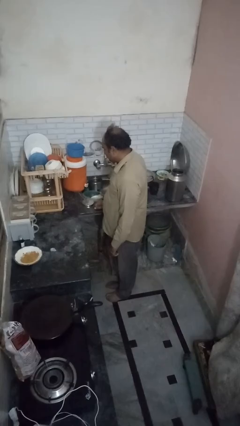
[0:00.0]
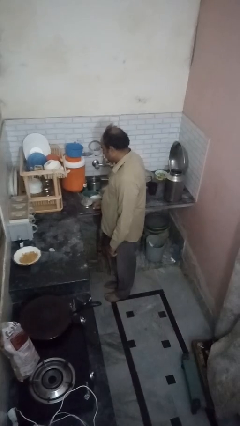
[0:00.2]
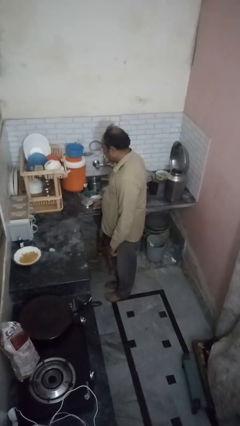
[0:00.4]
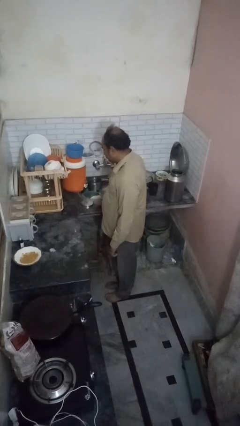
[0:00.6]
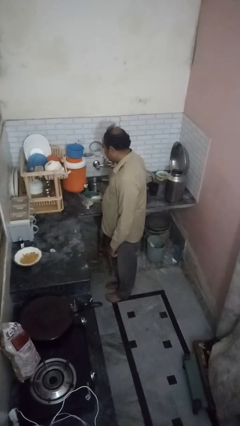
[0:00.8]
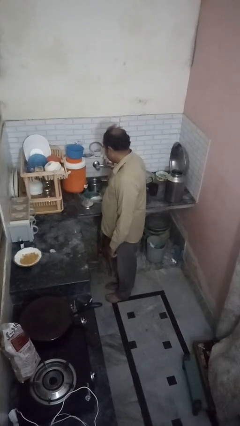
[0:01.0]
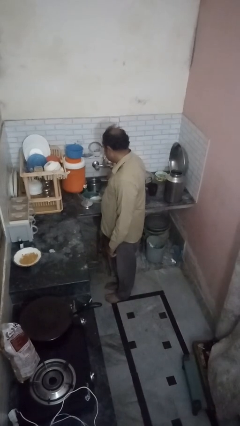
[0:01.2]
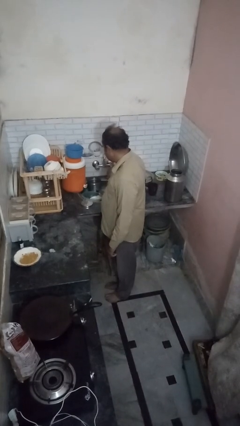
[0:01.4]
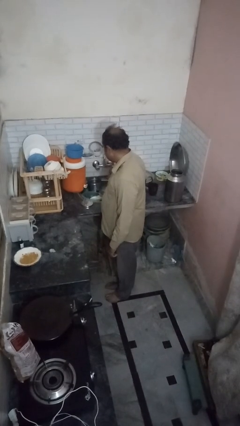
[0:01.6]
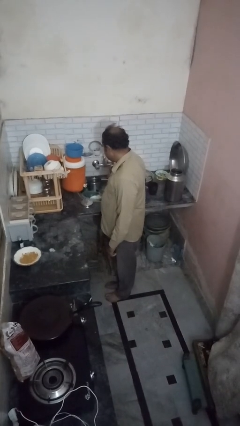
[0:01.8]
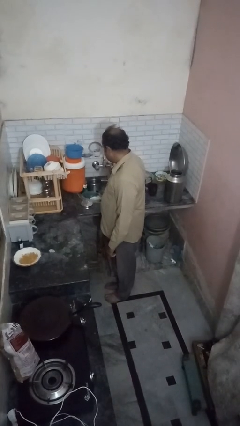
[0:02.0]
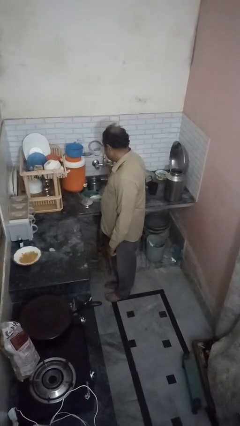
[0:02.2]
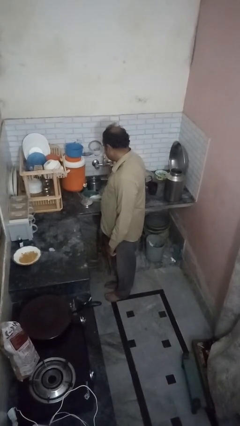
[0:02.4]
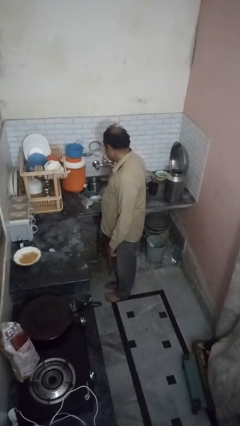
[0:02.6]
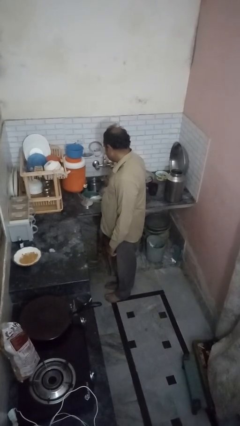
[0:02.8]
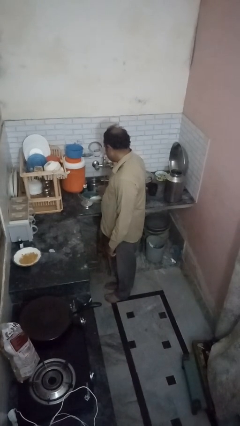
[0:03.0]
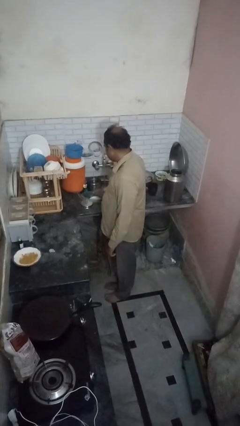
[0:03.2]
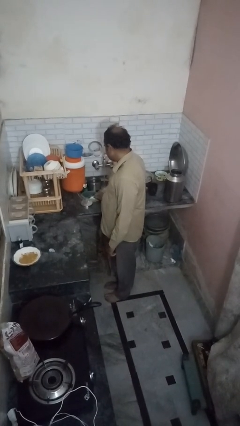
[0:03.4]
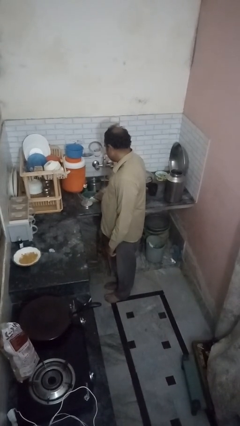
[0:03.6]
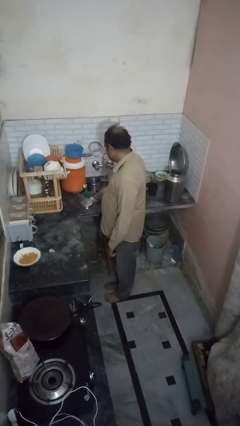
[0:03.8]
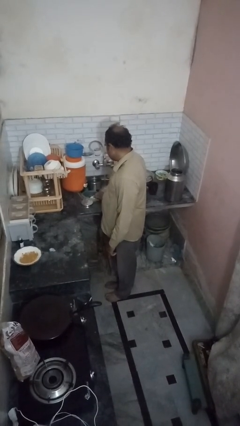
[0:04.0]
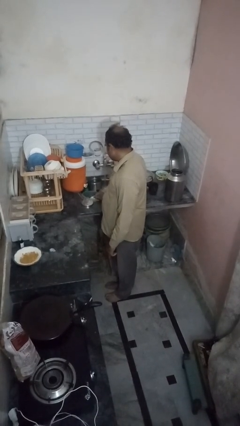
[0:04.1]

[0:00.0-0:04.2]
person opens dishwasher

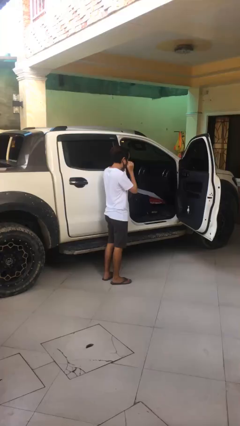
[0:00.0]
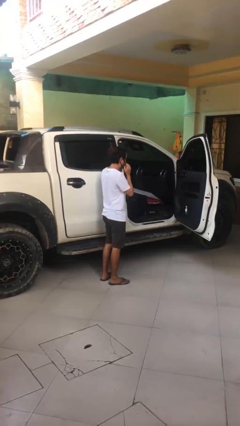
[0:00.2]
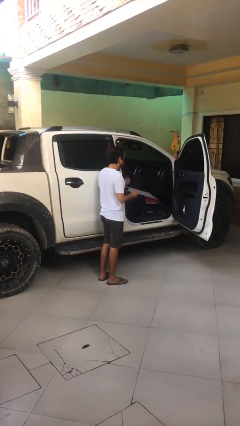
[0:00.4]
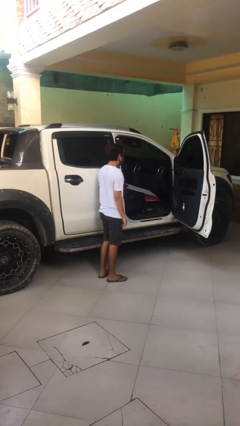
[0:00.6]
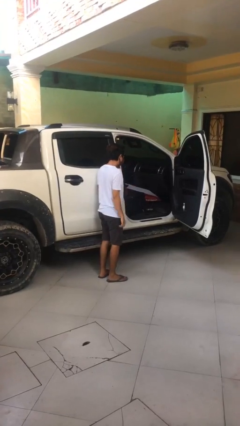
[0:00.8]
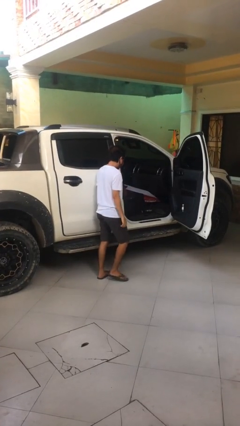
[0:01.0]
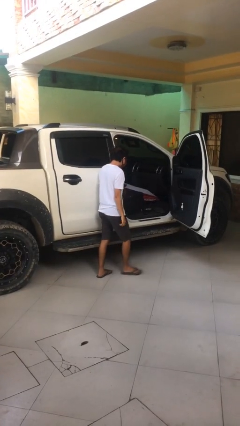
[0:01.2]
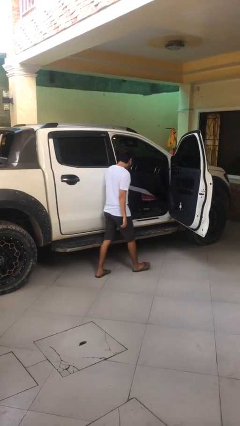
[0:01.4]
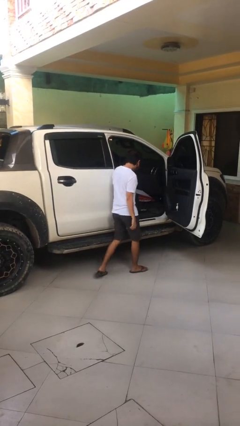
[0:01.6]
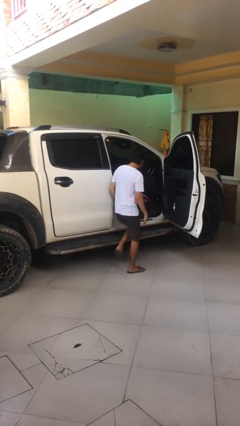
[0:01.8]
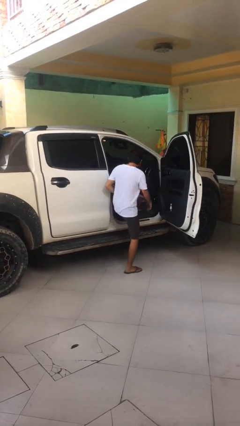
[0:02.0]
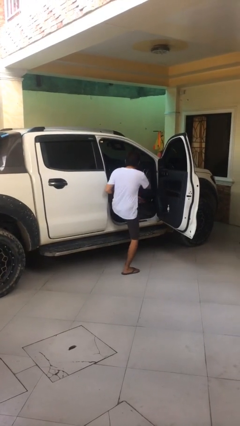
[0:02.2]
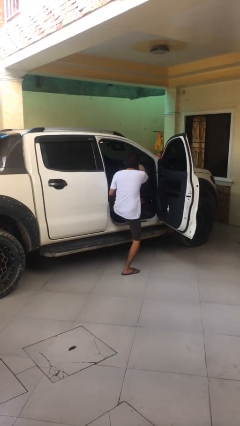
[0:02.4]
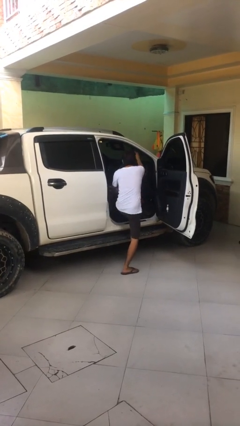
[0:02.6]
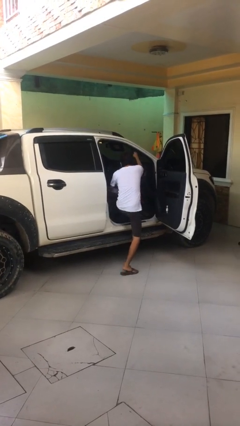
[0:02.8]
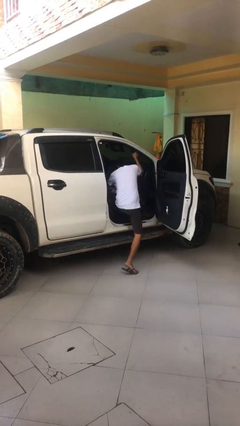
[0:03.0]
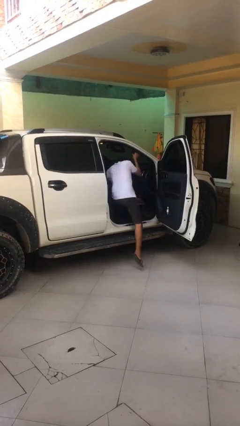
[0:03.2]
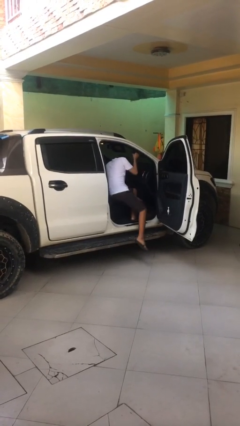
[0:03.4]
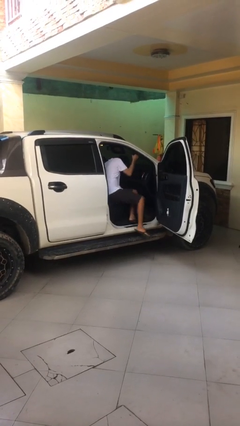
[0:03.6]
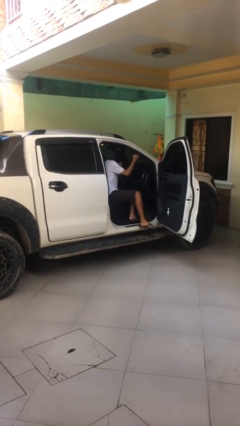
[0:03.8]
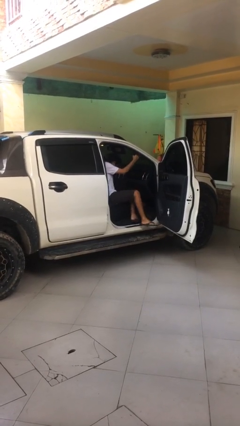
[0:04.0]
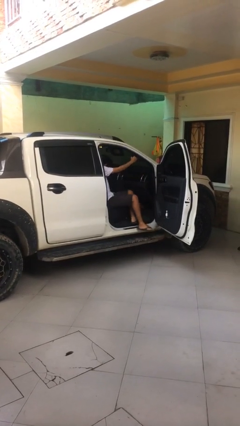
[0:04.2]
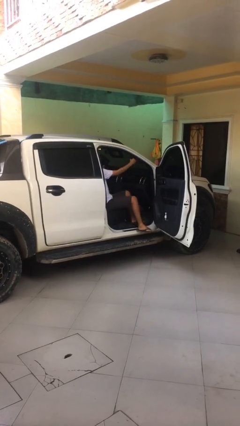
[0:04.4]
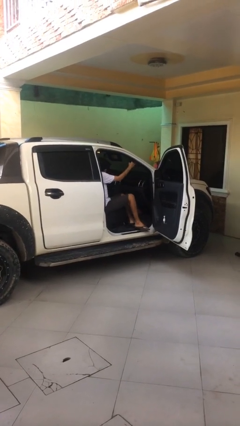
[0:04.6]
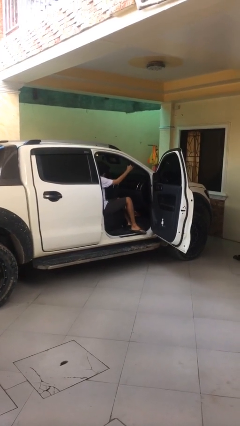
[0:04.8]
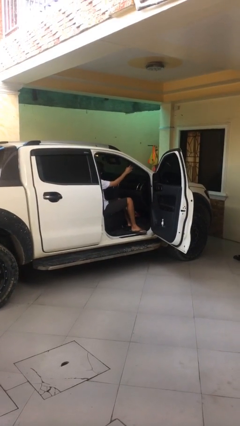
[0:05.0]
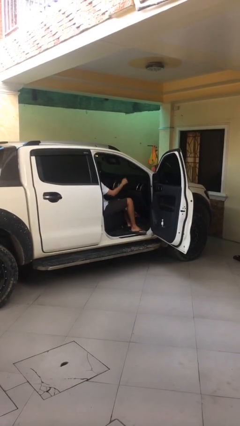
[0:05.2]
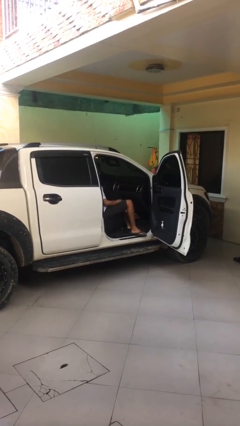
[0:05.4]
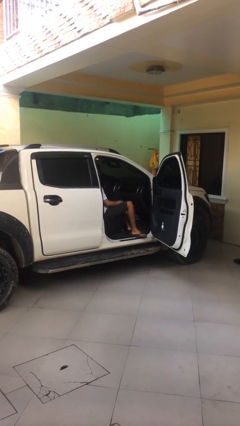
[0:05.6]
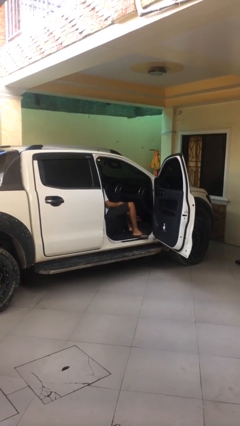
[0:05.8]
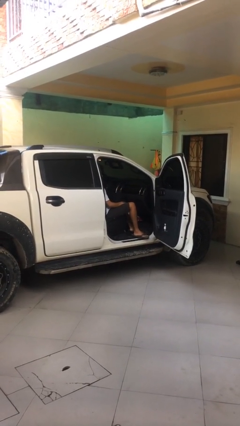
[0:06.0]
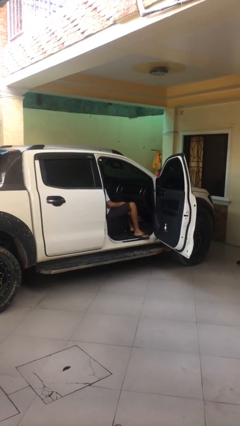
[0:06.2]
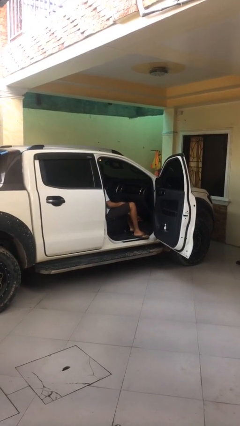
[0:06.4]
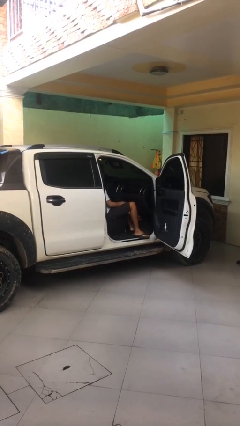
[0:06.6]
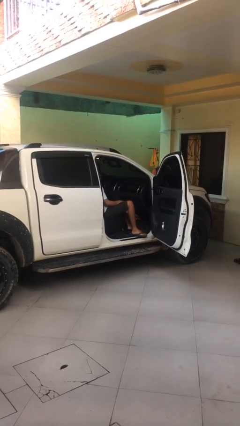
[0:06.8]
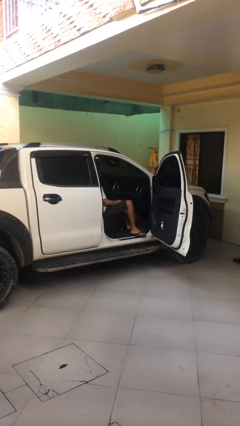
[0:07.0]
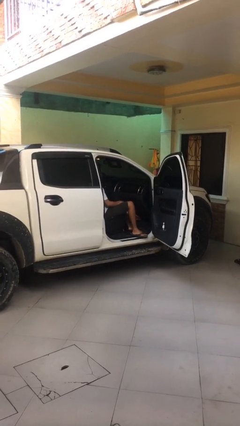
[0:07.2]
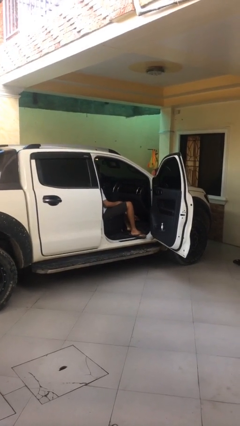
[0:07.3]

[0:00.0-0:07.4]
person enters car

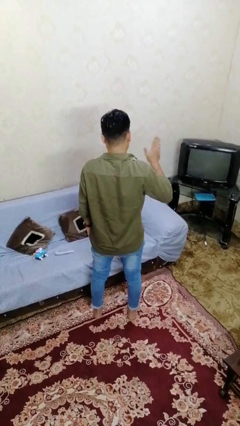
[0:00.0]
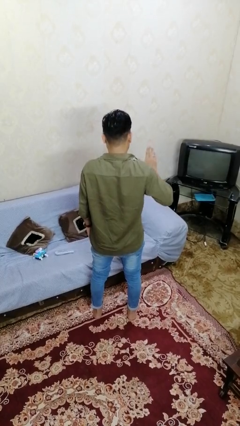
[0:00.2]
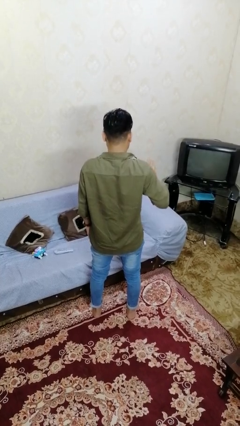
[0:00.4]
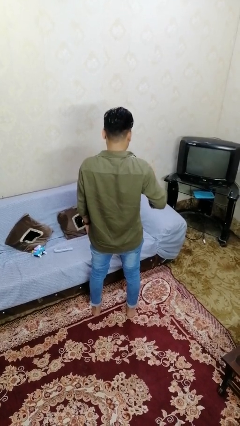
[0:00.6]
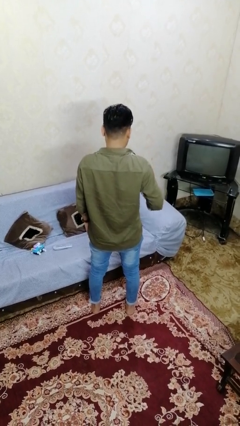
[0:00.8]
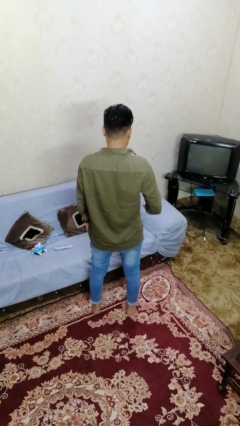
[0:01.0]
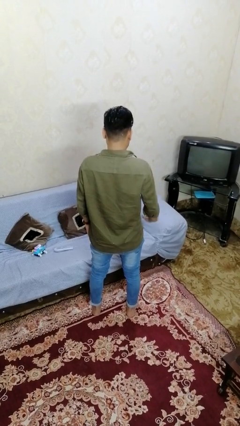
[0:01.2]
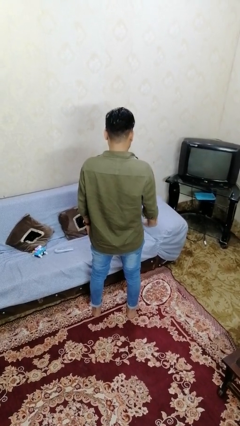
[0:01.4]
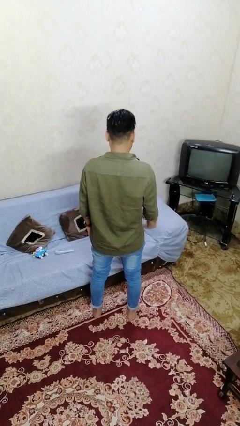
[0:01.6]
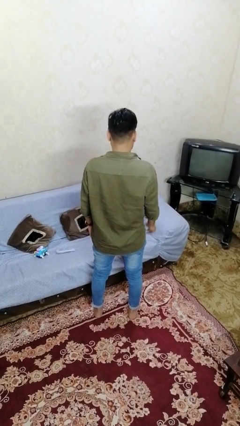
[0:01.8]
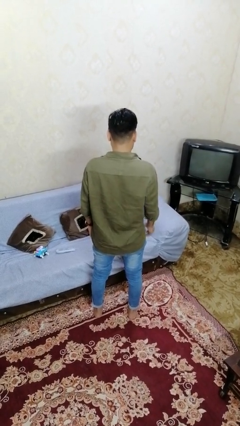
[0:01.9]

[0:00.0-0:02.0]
person gestures swipe down

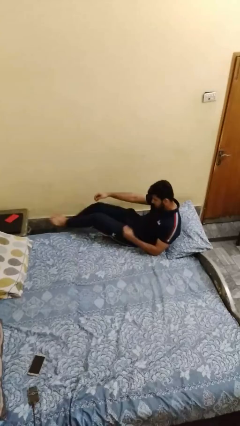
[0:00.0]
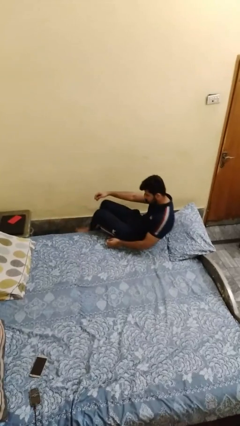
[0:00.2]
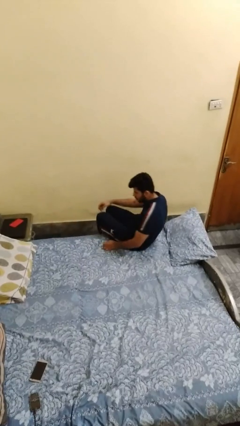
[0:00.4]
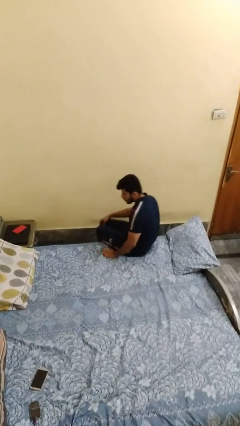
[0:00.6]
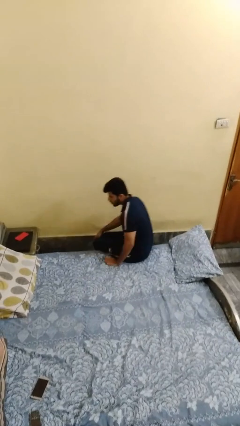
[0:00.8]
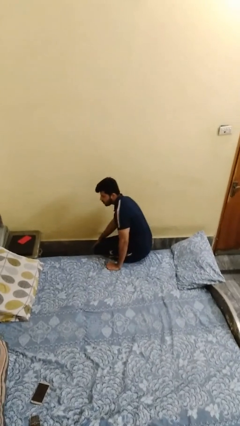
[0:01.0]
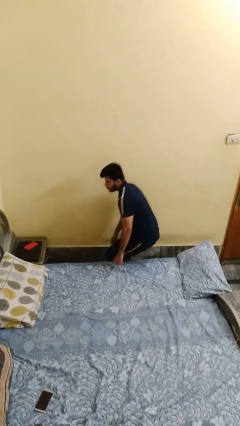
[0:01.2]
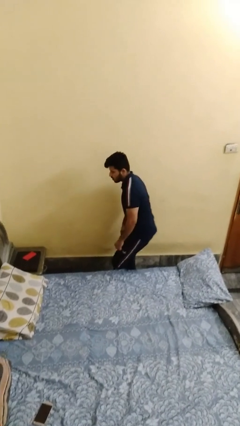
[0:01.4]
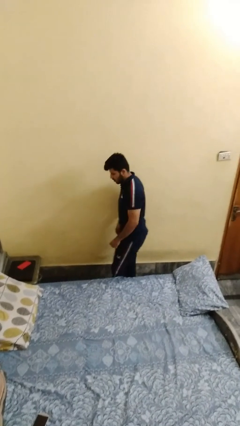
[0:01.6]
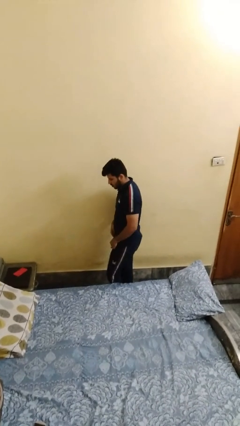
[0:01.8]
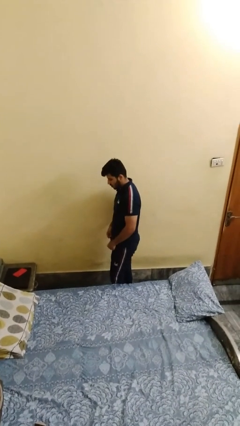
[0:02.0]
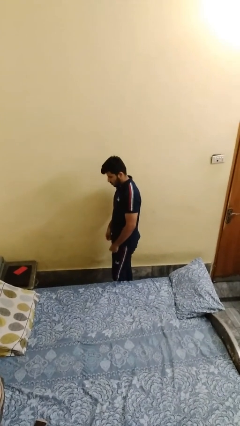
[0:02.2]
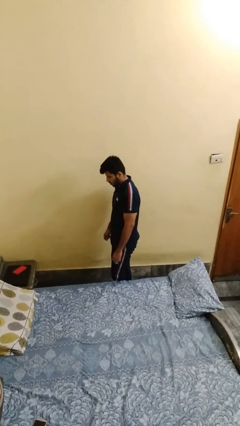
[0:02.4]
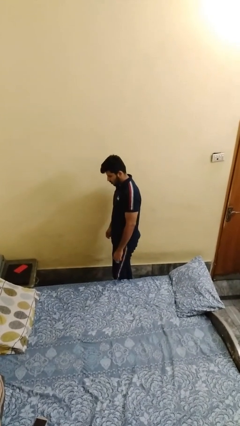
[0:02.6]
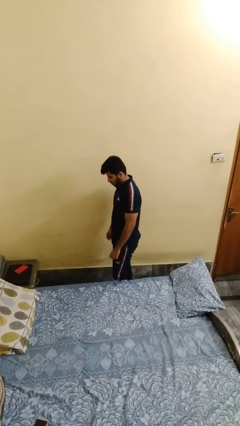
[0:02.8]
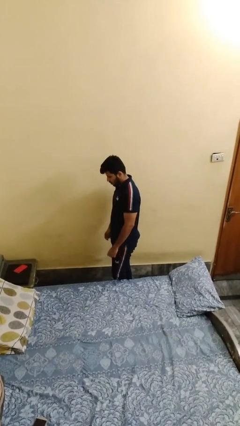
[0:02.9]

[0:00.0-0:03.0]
person stands up

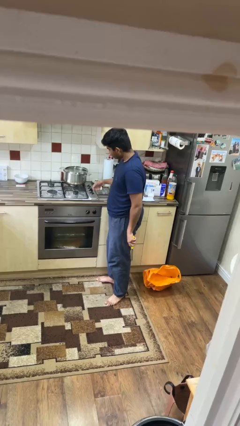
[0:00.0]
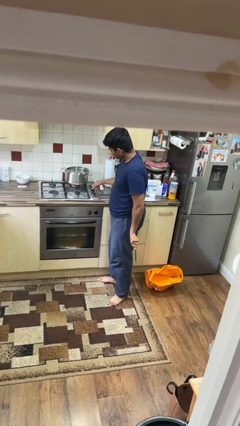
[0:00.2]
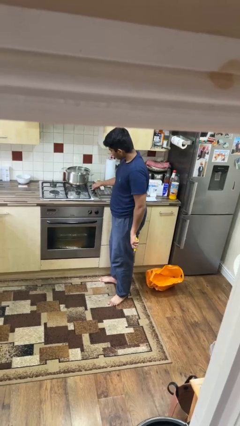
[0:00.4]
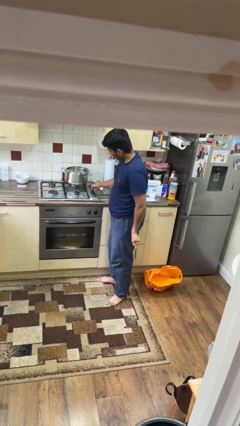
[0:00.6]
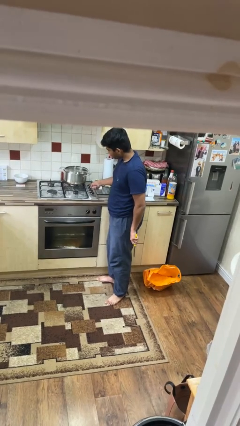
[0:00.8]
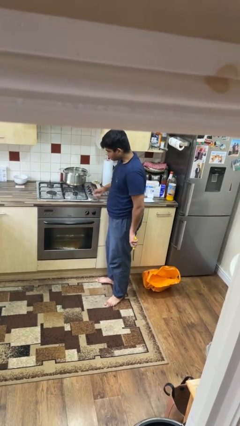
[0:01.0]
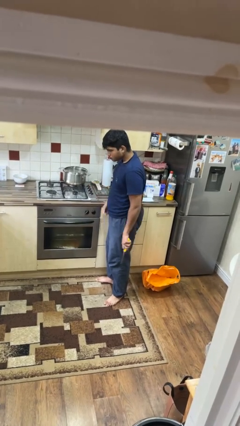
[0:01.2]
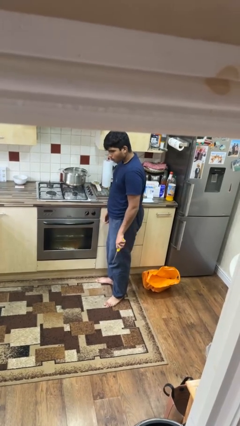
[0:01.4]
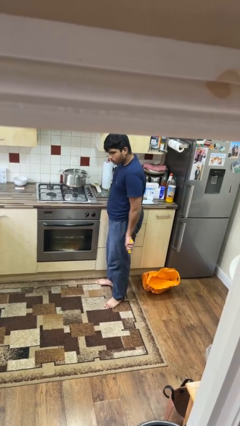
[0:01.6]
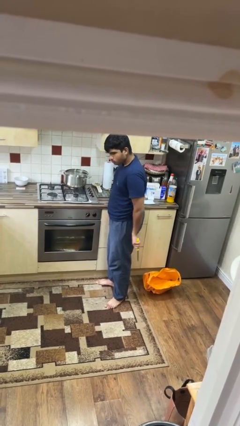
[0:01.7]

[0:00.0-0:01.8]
person turns off stovetop
